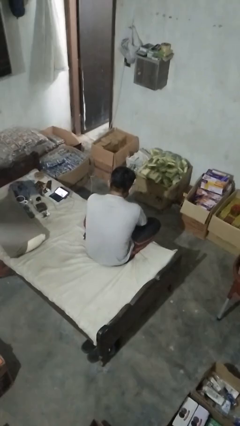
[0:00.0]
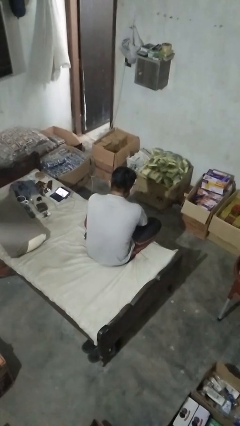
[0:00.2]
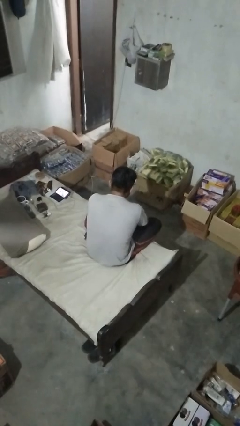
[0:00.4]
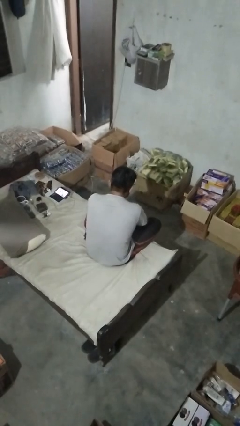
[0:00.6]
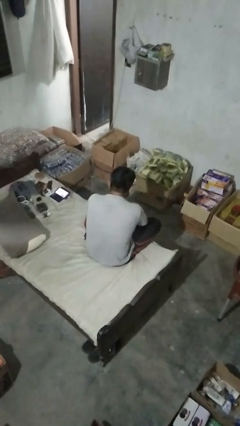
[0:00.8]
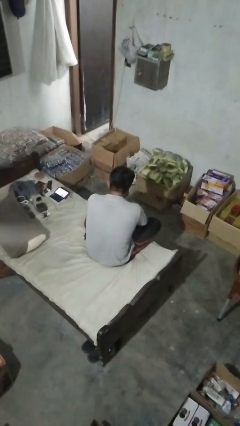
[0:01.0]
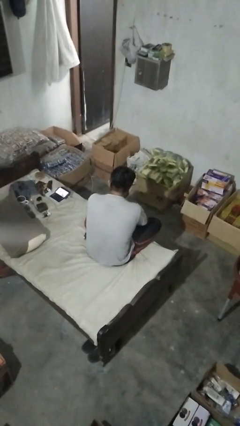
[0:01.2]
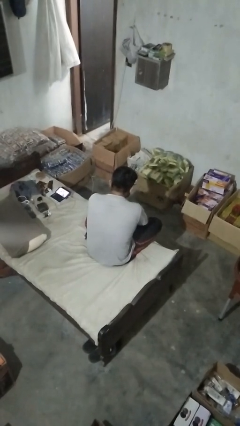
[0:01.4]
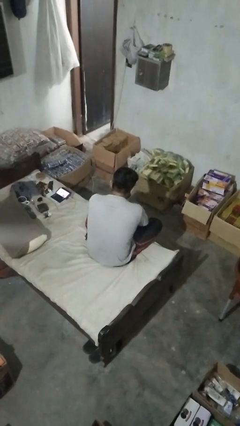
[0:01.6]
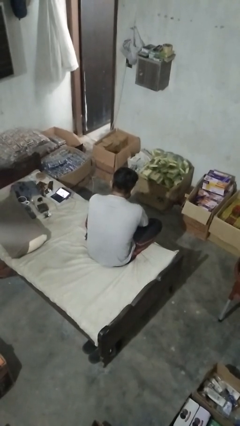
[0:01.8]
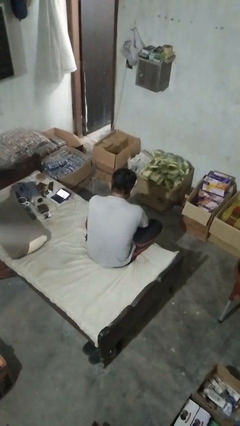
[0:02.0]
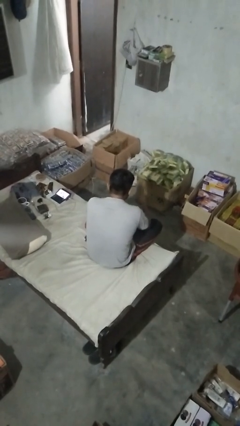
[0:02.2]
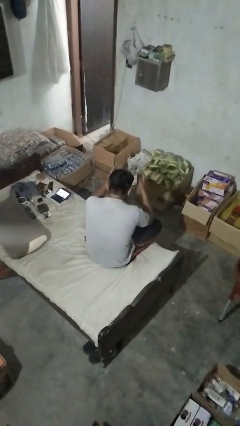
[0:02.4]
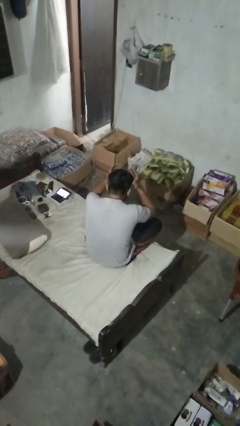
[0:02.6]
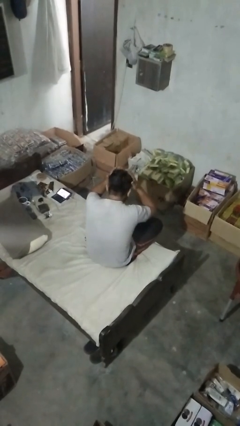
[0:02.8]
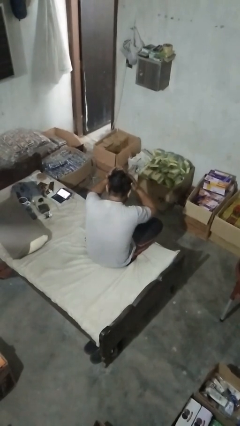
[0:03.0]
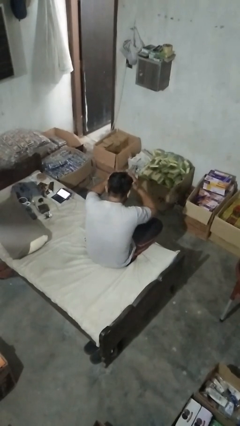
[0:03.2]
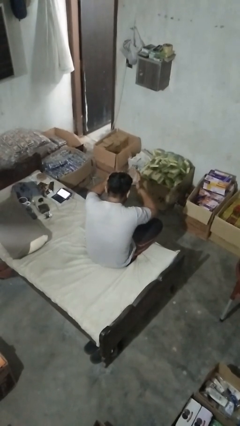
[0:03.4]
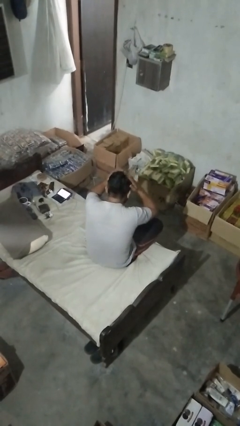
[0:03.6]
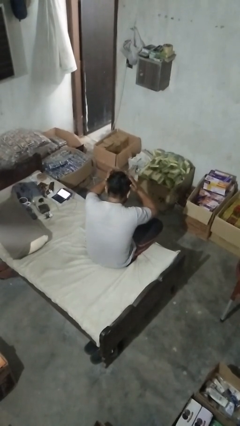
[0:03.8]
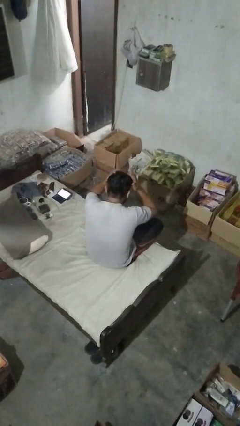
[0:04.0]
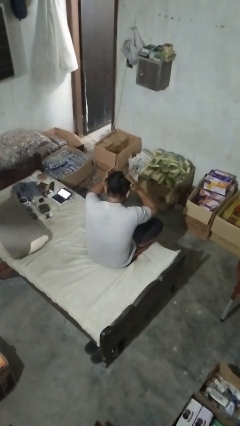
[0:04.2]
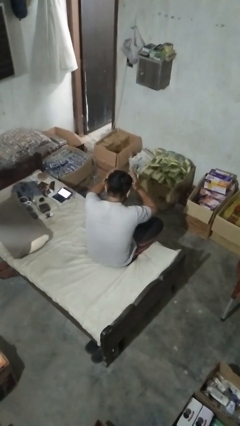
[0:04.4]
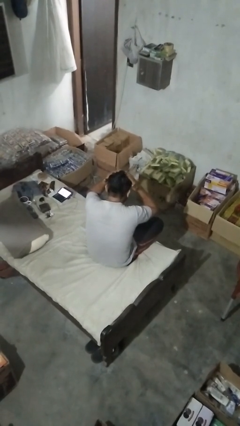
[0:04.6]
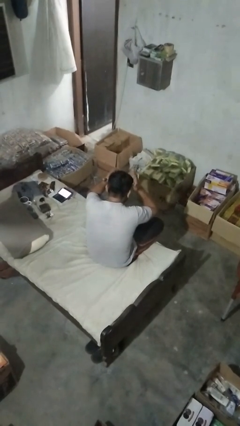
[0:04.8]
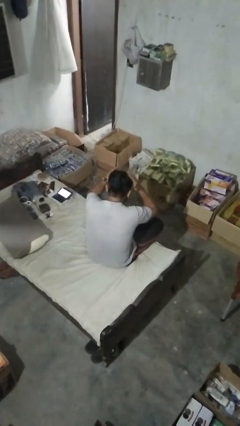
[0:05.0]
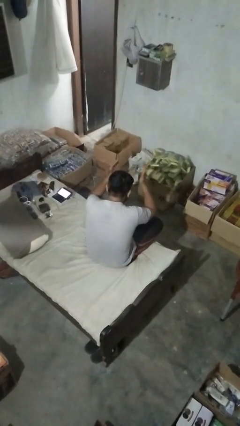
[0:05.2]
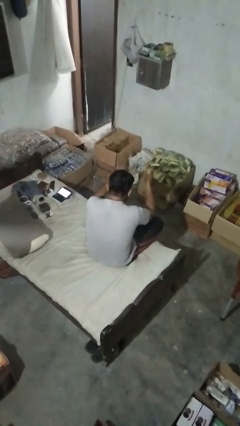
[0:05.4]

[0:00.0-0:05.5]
person pats head

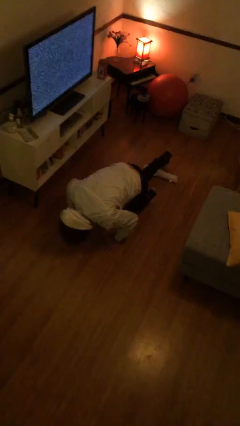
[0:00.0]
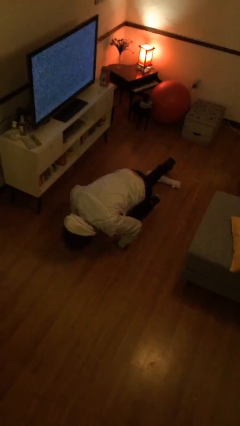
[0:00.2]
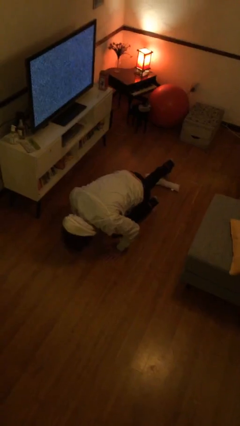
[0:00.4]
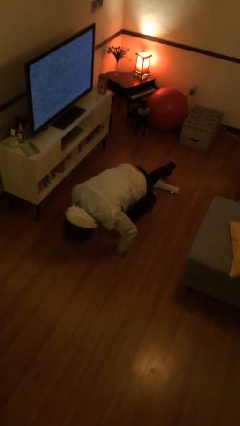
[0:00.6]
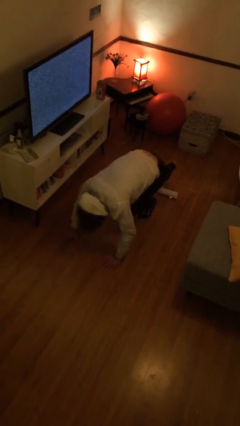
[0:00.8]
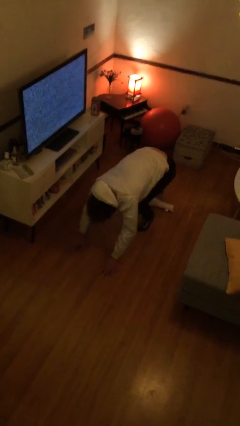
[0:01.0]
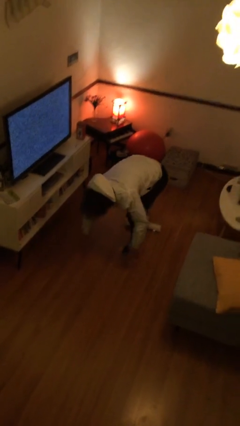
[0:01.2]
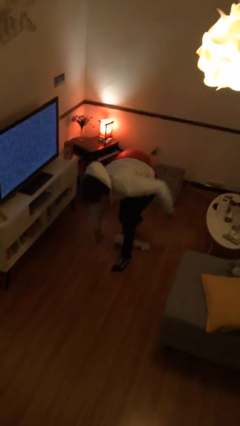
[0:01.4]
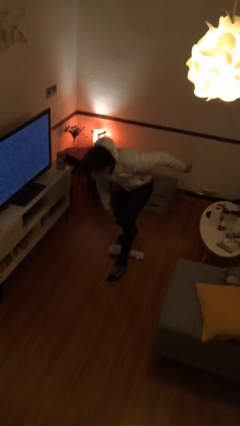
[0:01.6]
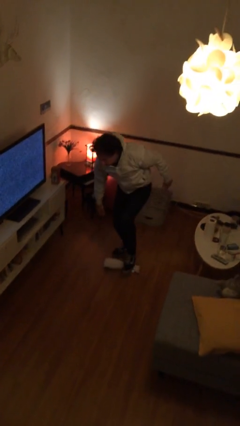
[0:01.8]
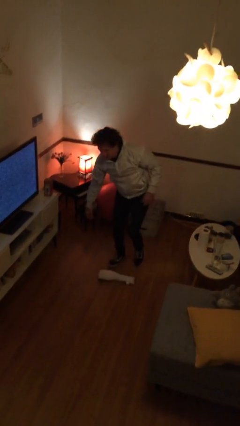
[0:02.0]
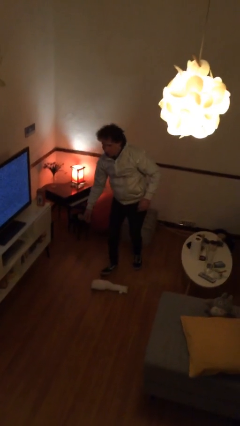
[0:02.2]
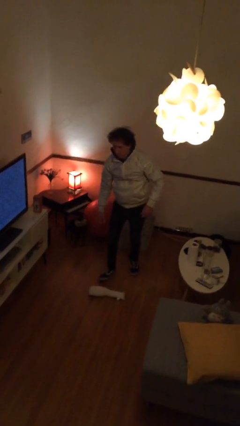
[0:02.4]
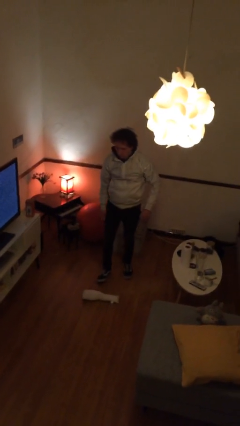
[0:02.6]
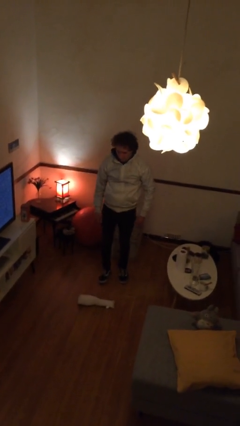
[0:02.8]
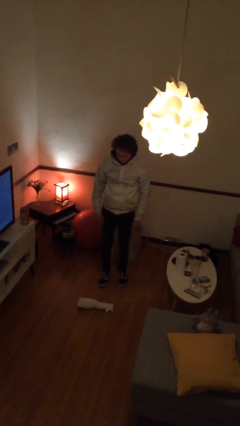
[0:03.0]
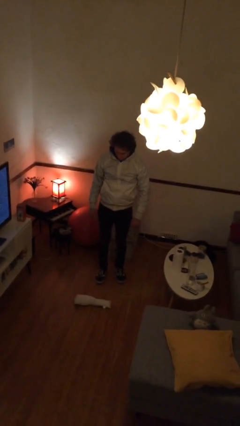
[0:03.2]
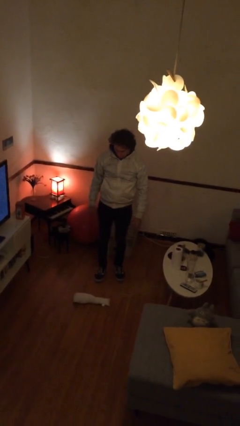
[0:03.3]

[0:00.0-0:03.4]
person stands up from floor

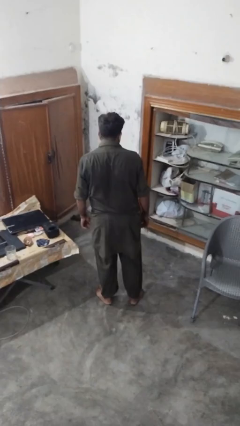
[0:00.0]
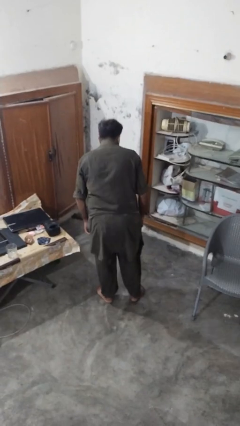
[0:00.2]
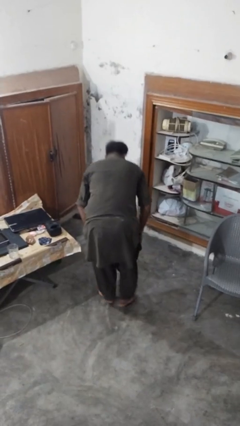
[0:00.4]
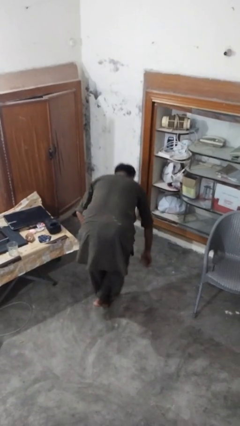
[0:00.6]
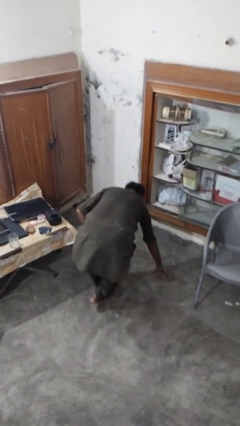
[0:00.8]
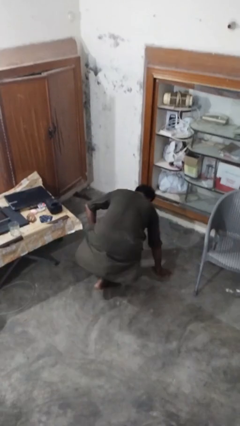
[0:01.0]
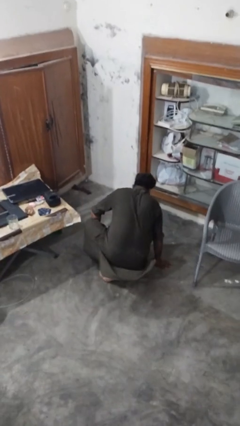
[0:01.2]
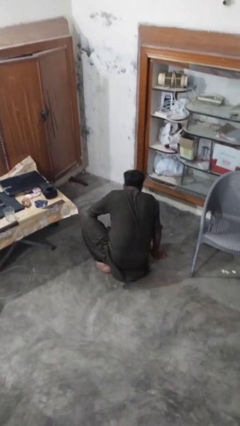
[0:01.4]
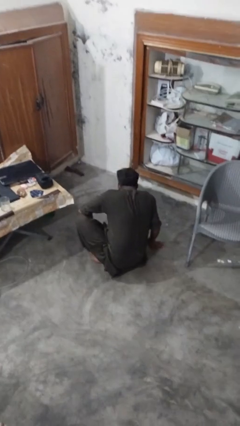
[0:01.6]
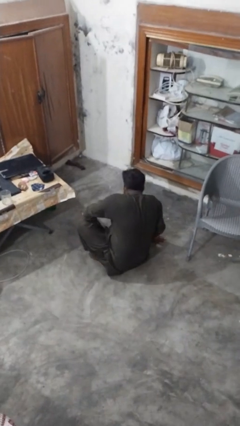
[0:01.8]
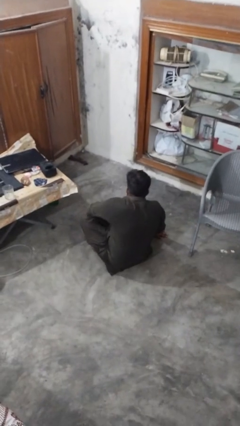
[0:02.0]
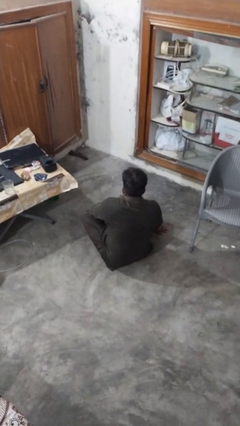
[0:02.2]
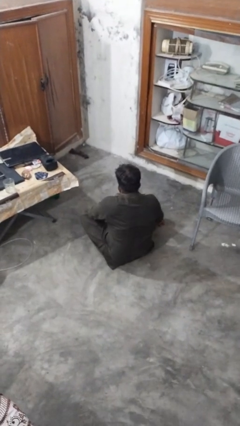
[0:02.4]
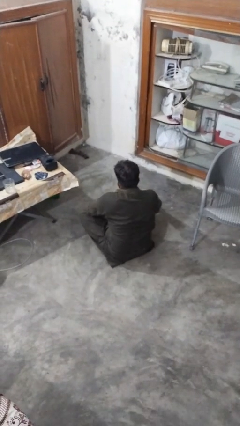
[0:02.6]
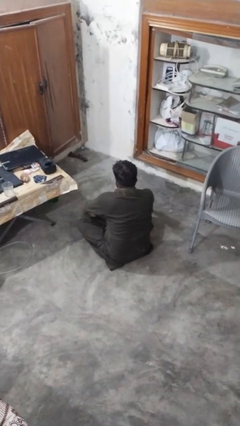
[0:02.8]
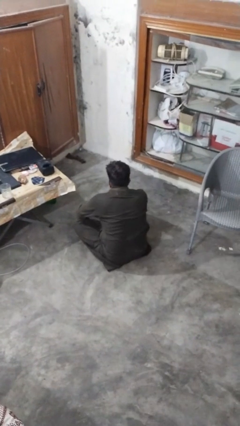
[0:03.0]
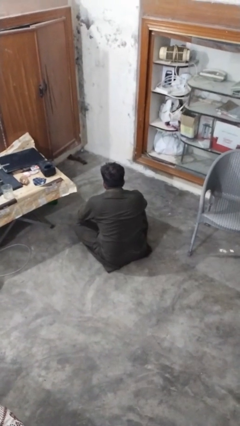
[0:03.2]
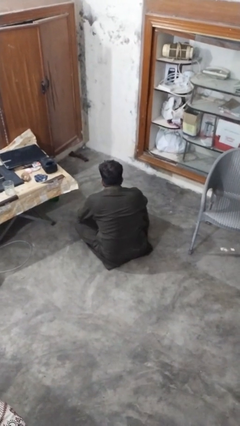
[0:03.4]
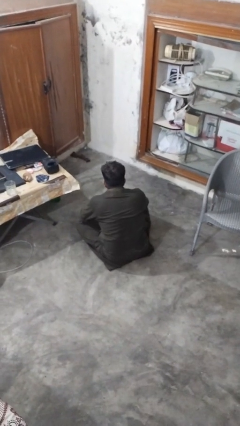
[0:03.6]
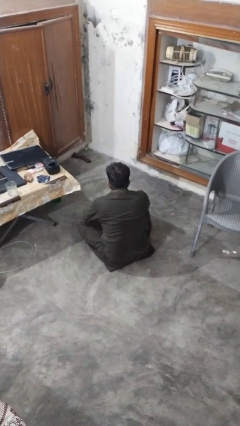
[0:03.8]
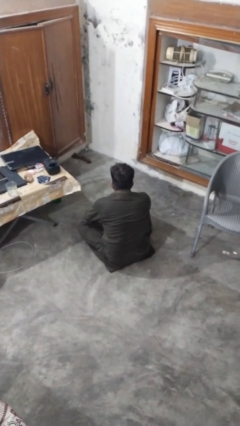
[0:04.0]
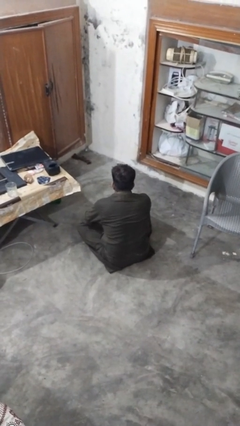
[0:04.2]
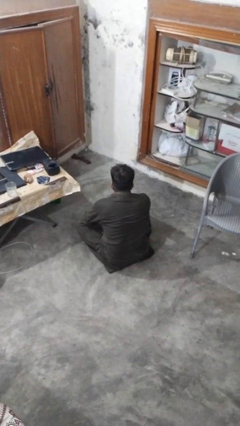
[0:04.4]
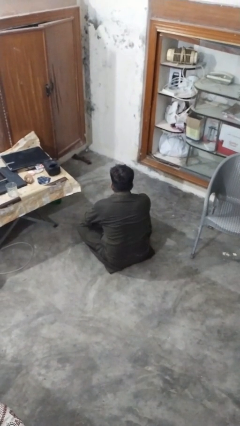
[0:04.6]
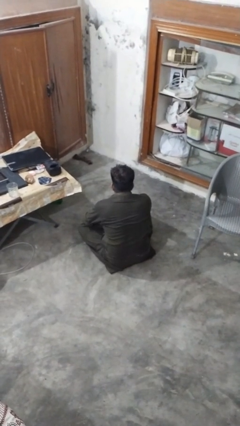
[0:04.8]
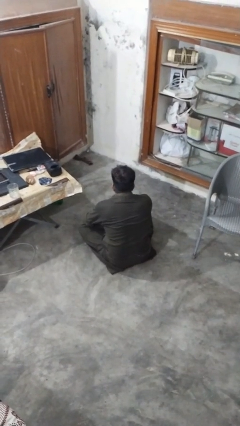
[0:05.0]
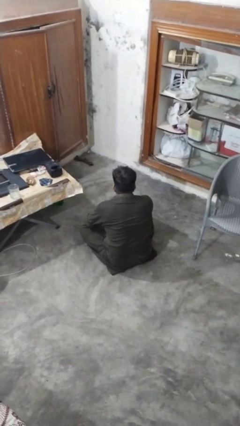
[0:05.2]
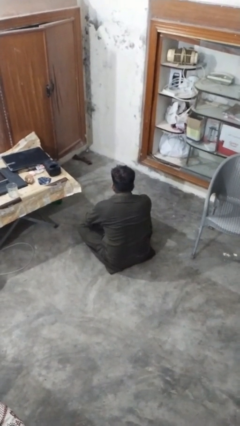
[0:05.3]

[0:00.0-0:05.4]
person sits crisscross

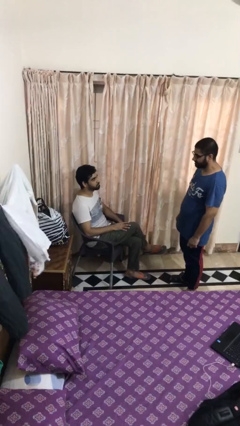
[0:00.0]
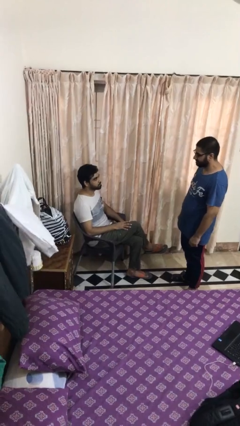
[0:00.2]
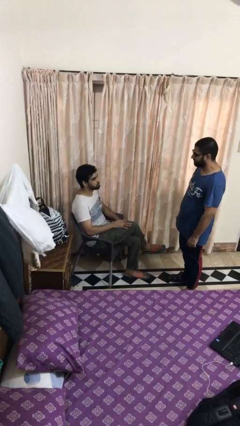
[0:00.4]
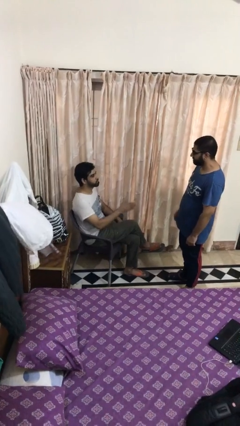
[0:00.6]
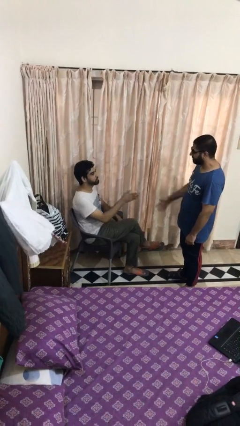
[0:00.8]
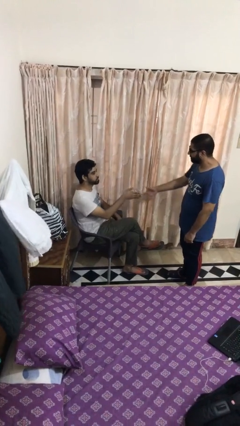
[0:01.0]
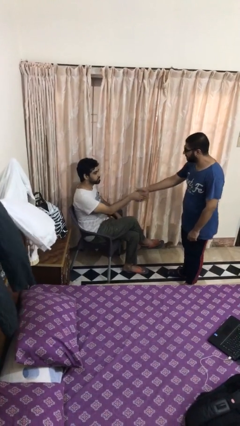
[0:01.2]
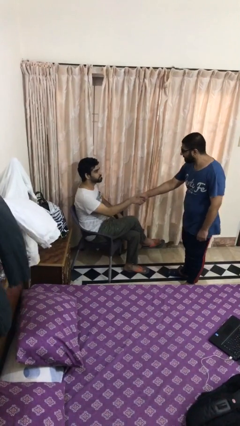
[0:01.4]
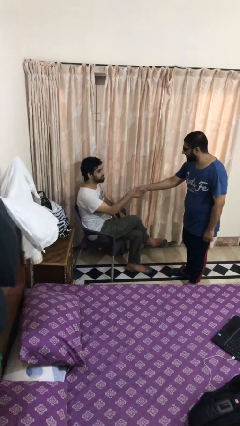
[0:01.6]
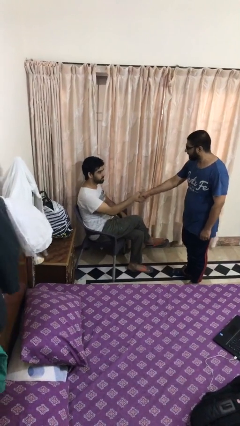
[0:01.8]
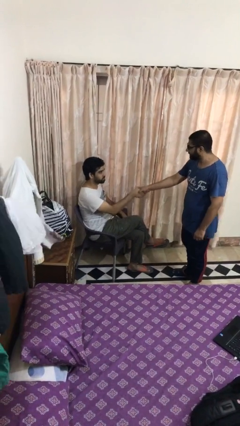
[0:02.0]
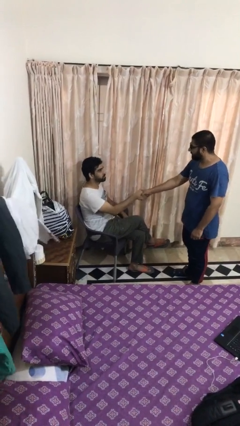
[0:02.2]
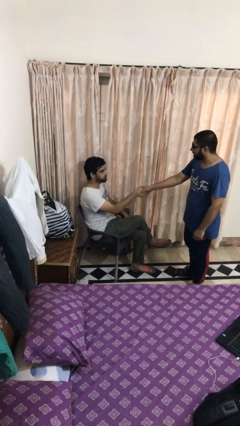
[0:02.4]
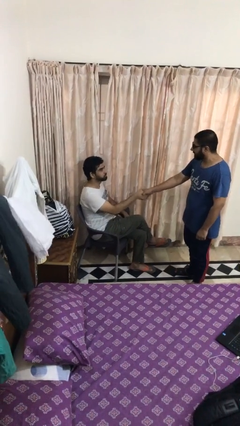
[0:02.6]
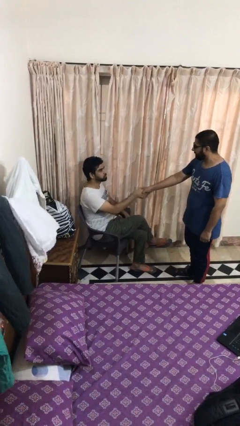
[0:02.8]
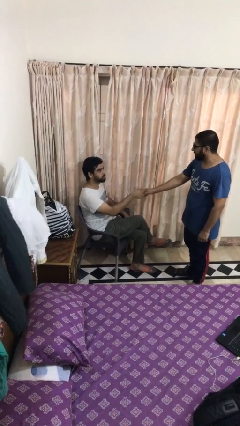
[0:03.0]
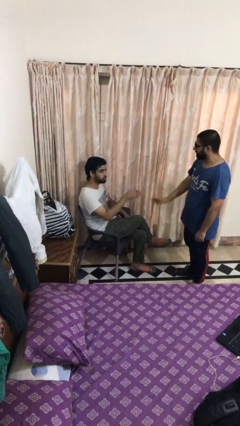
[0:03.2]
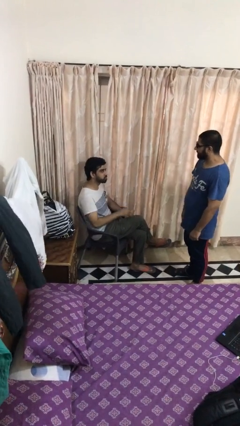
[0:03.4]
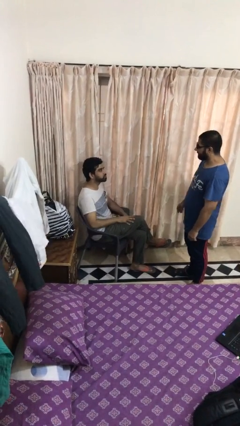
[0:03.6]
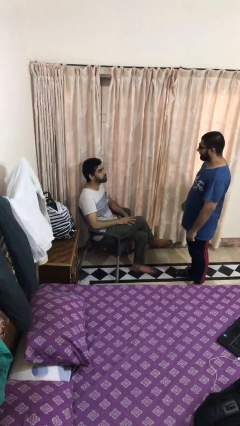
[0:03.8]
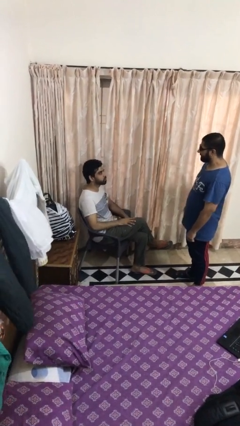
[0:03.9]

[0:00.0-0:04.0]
person shakes hand
